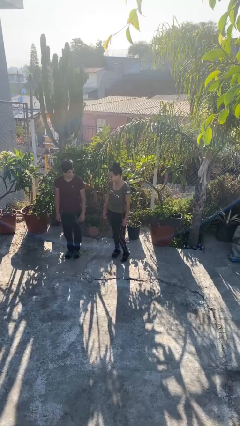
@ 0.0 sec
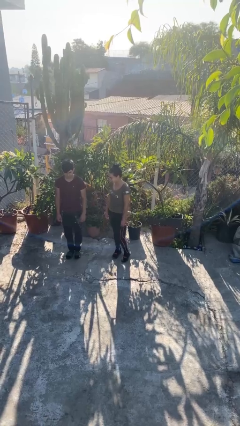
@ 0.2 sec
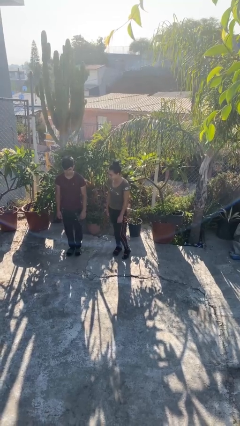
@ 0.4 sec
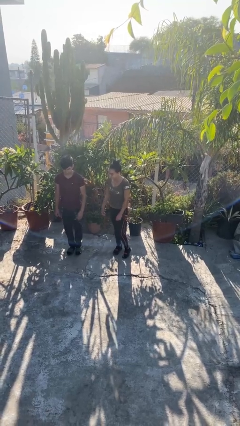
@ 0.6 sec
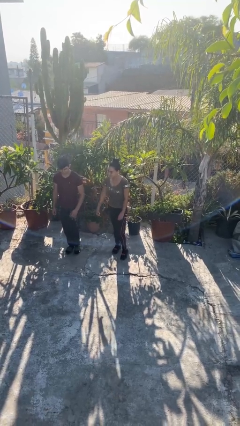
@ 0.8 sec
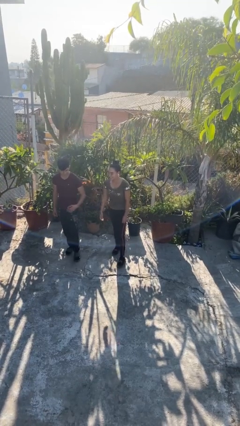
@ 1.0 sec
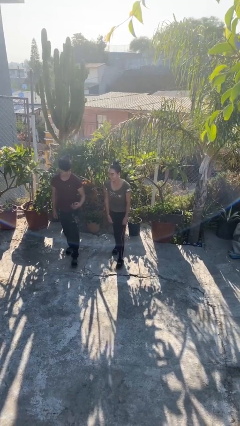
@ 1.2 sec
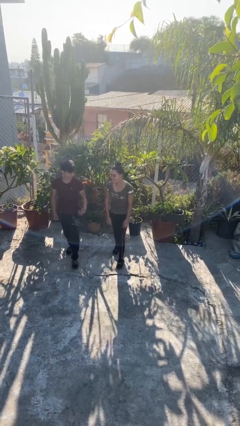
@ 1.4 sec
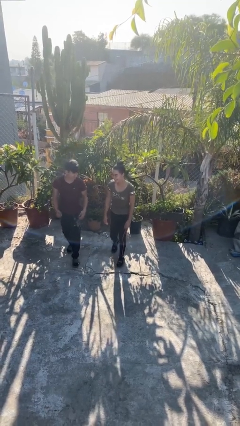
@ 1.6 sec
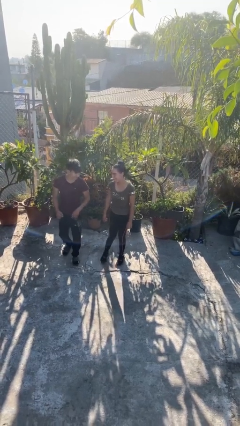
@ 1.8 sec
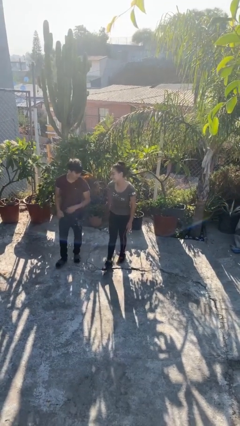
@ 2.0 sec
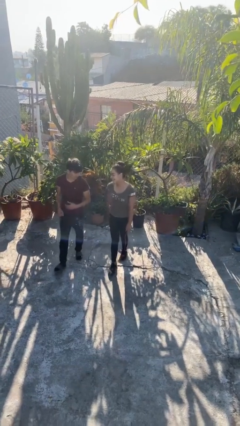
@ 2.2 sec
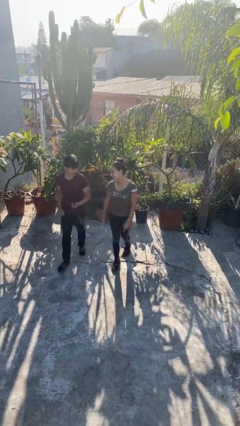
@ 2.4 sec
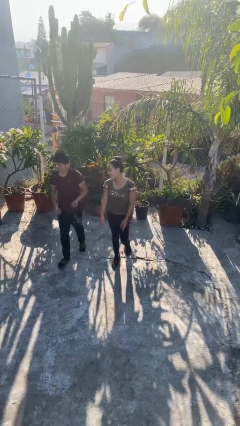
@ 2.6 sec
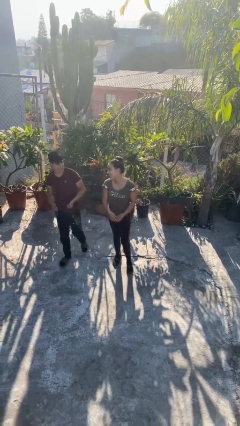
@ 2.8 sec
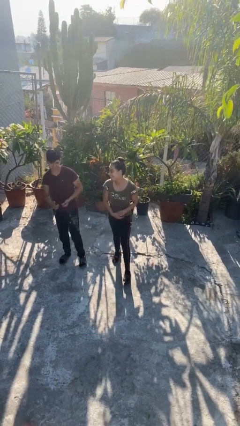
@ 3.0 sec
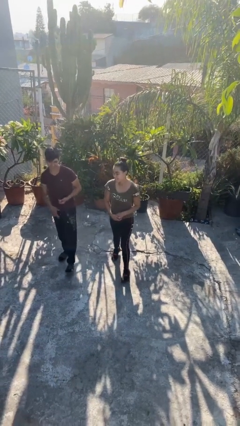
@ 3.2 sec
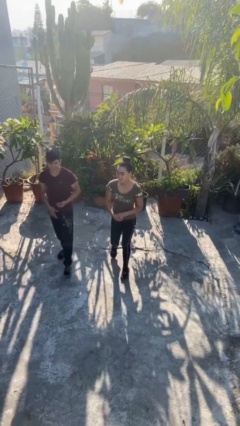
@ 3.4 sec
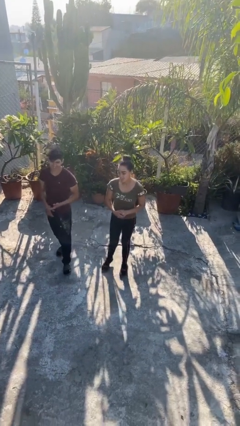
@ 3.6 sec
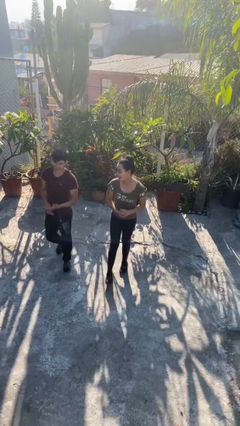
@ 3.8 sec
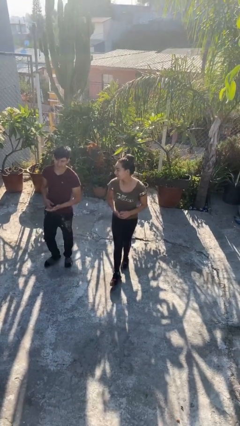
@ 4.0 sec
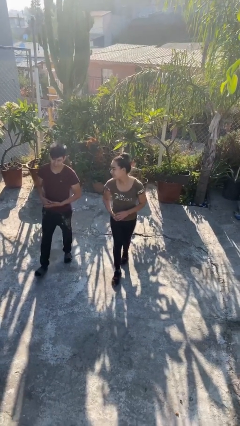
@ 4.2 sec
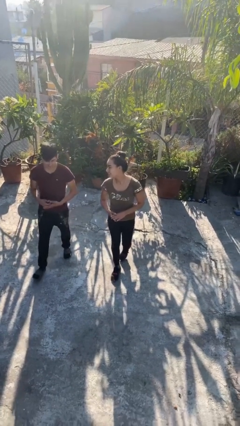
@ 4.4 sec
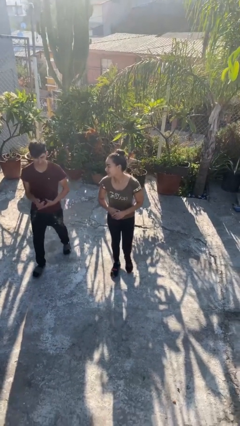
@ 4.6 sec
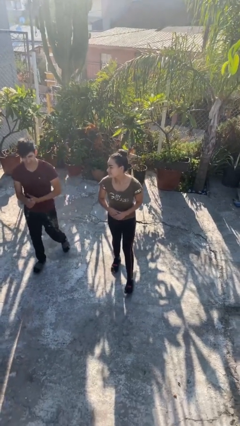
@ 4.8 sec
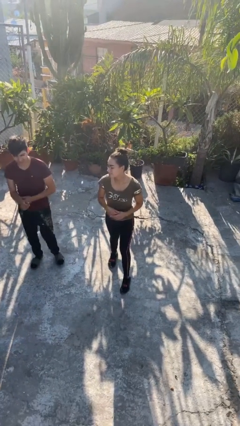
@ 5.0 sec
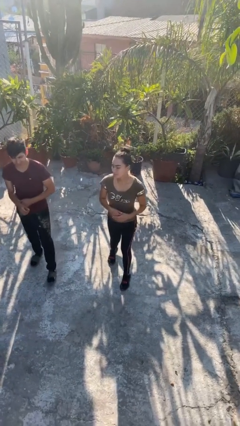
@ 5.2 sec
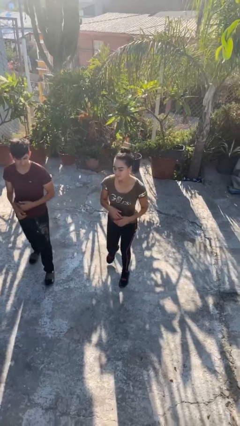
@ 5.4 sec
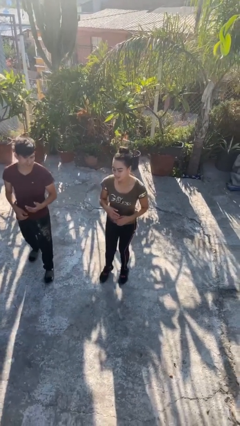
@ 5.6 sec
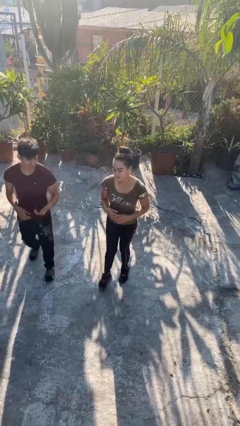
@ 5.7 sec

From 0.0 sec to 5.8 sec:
person talks to person

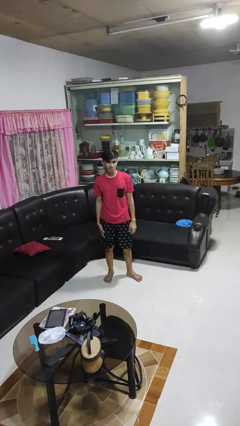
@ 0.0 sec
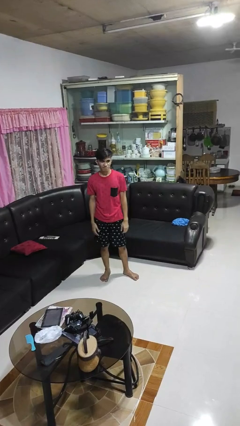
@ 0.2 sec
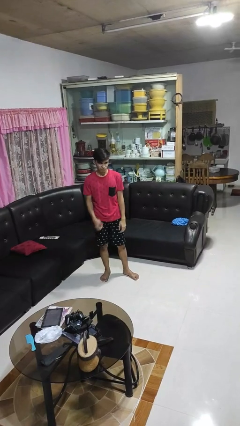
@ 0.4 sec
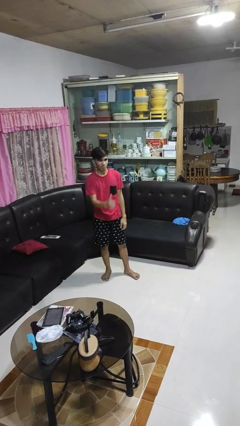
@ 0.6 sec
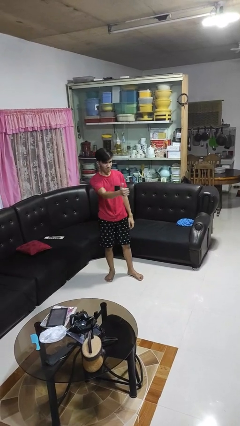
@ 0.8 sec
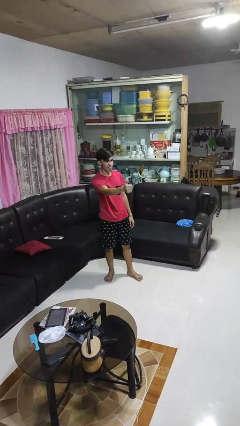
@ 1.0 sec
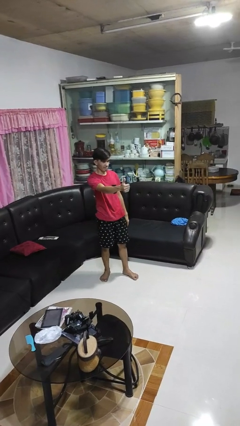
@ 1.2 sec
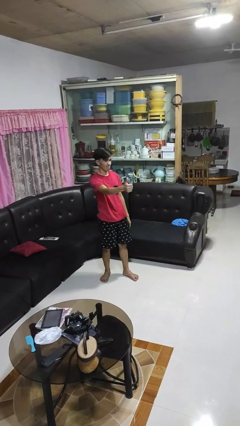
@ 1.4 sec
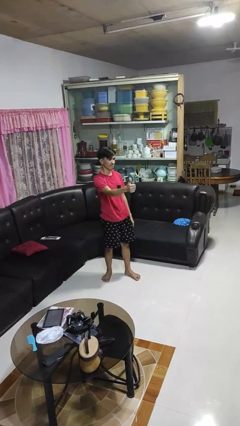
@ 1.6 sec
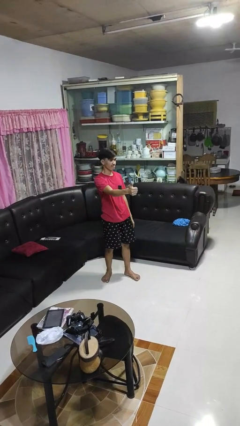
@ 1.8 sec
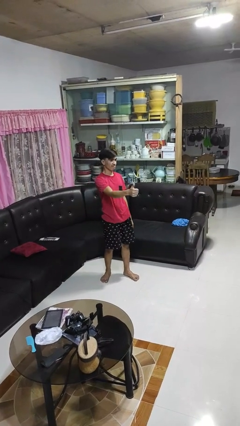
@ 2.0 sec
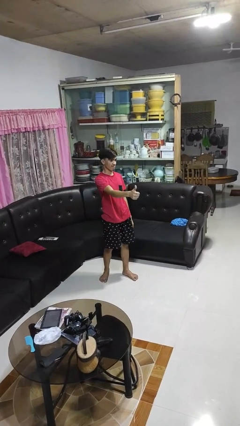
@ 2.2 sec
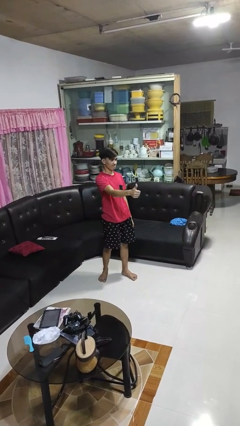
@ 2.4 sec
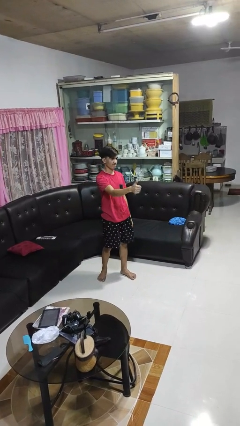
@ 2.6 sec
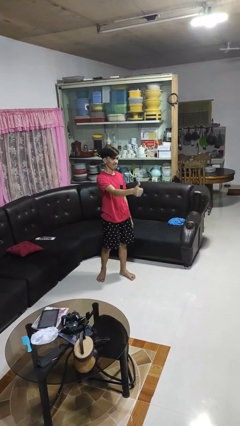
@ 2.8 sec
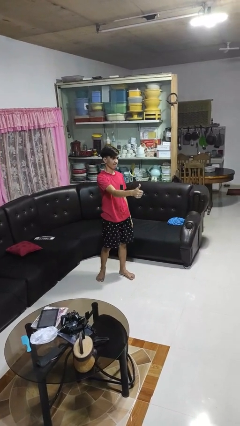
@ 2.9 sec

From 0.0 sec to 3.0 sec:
person gestures thumbs up

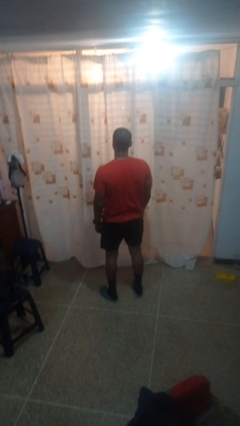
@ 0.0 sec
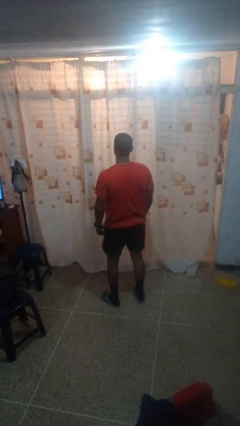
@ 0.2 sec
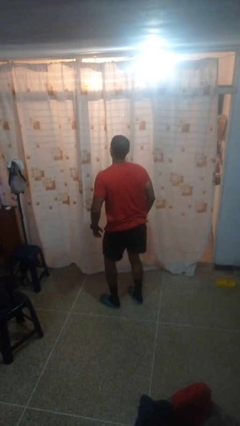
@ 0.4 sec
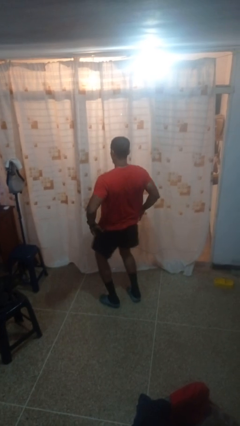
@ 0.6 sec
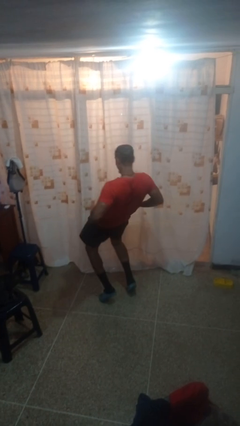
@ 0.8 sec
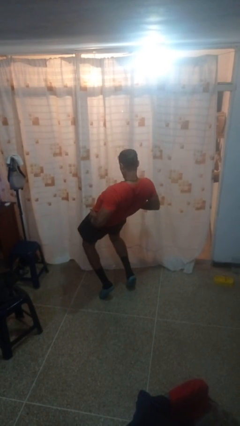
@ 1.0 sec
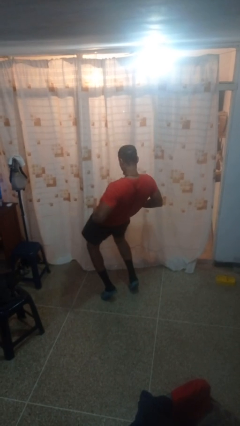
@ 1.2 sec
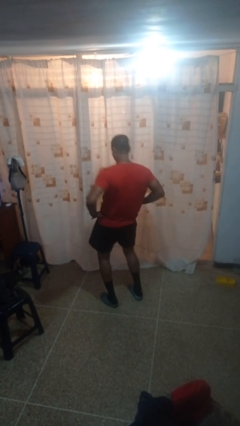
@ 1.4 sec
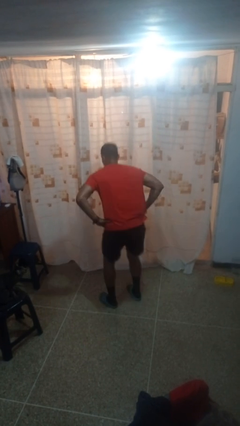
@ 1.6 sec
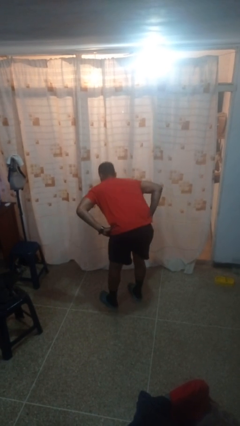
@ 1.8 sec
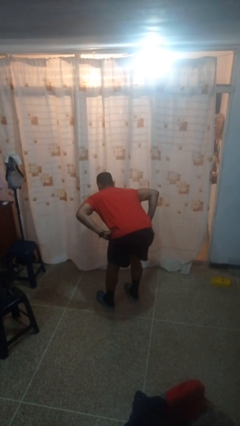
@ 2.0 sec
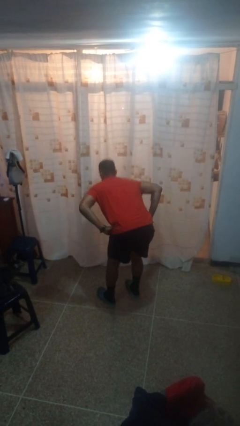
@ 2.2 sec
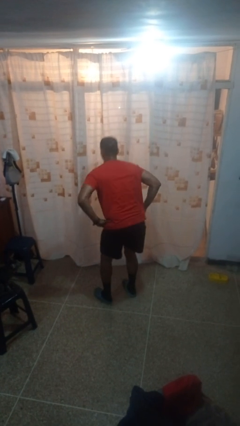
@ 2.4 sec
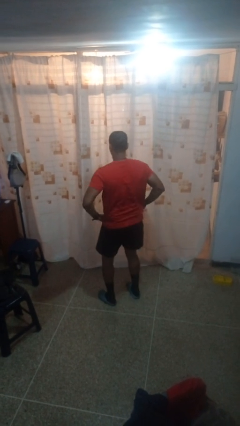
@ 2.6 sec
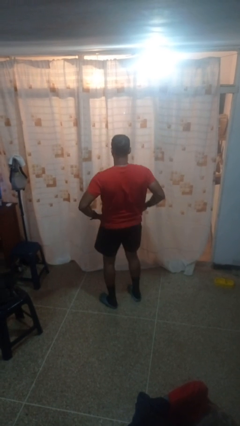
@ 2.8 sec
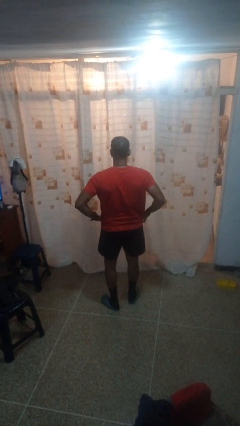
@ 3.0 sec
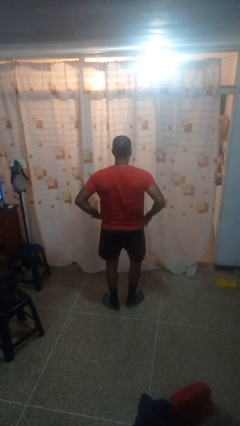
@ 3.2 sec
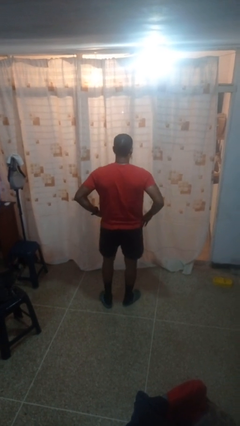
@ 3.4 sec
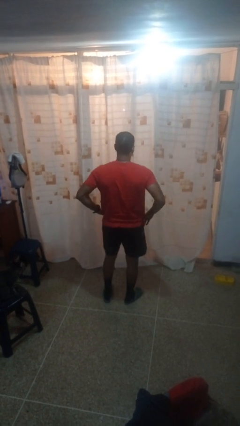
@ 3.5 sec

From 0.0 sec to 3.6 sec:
person wiggles hips

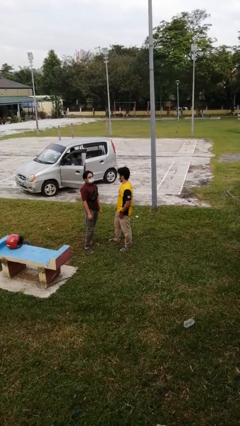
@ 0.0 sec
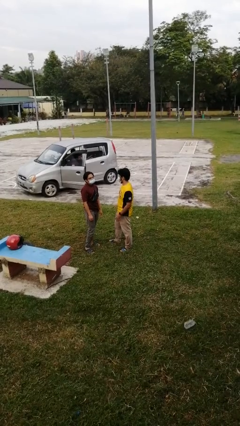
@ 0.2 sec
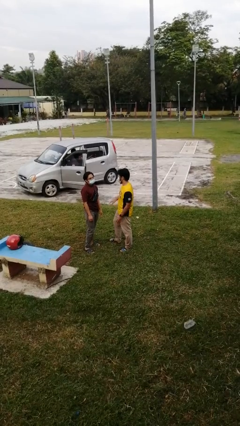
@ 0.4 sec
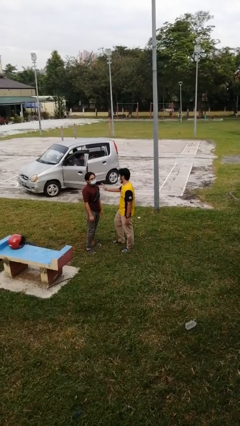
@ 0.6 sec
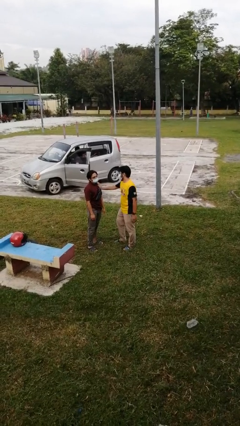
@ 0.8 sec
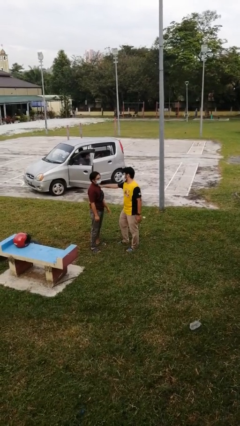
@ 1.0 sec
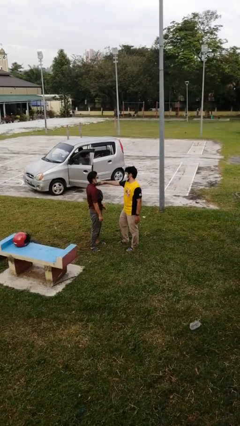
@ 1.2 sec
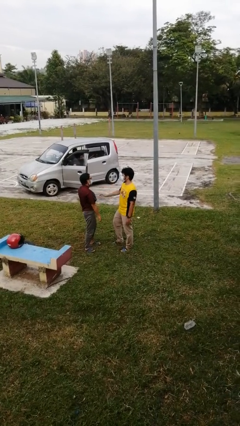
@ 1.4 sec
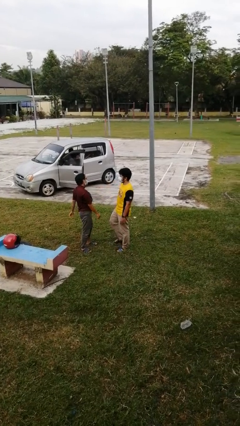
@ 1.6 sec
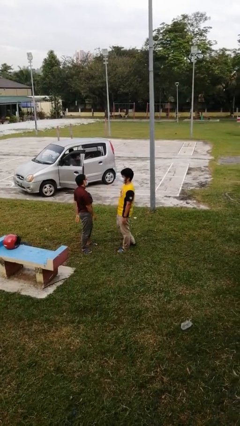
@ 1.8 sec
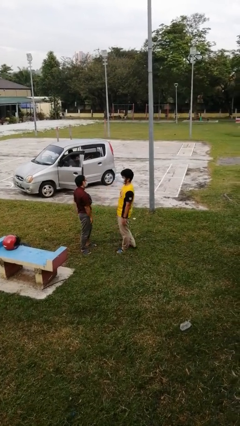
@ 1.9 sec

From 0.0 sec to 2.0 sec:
person shoves person

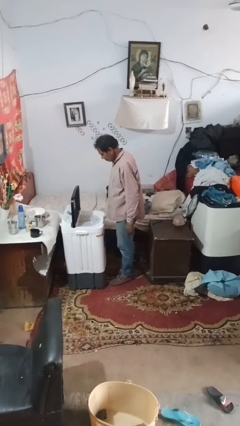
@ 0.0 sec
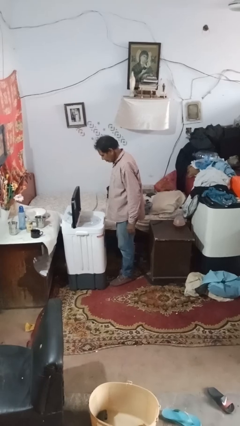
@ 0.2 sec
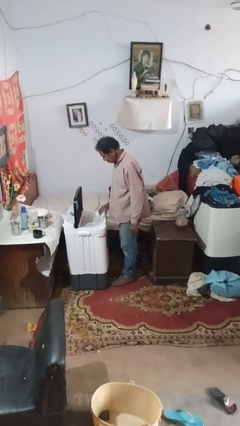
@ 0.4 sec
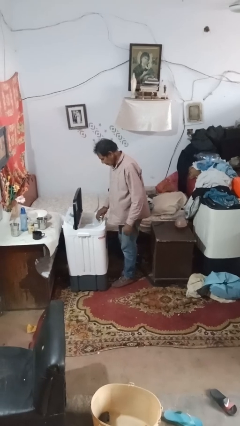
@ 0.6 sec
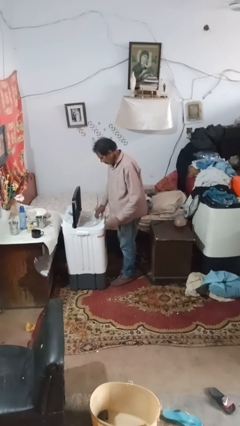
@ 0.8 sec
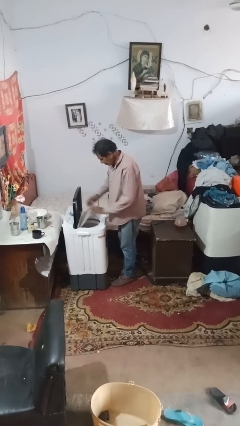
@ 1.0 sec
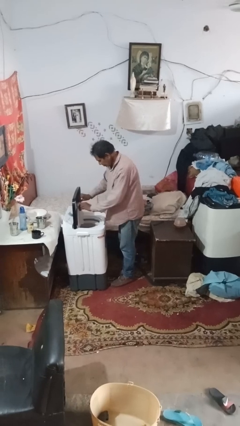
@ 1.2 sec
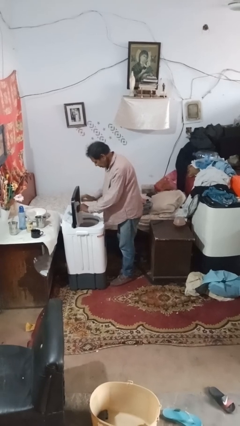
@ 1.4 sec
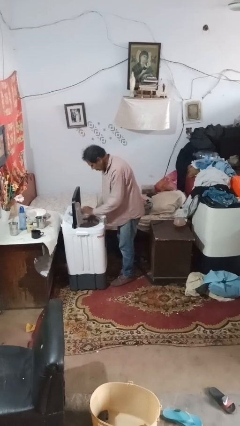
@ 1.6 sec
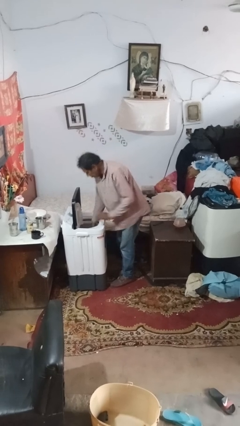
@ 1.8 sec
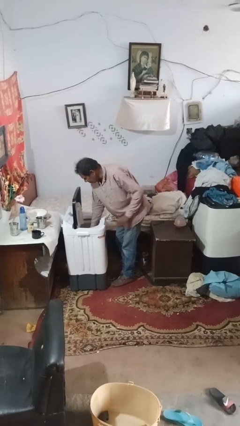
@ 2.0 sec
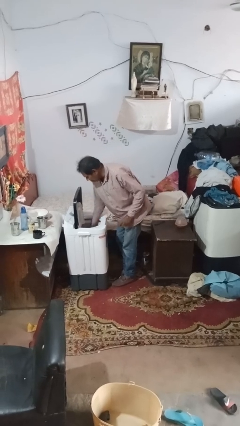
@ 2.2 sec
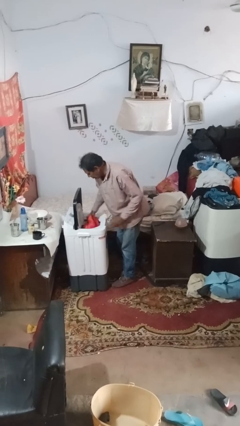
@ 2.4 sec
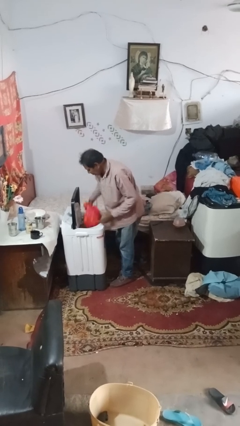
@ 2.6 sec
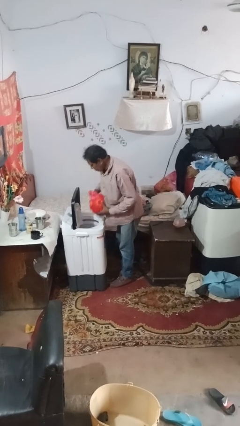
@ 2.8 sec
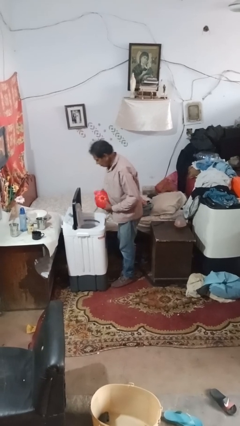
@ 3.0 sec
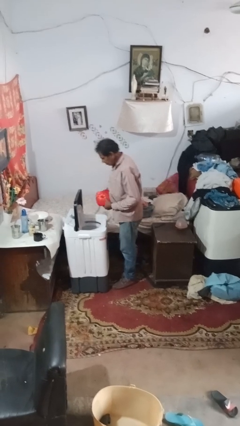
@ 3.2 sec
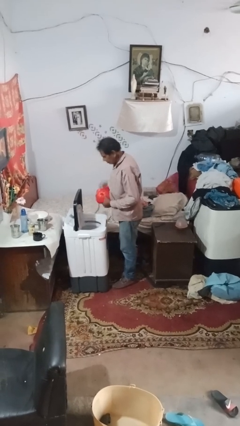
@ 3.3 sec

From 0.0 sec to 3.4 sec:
person unloads dryer
